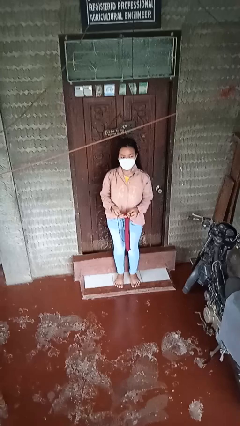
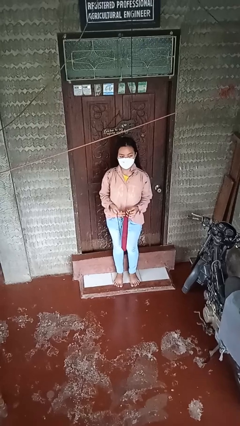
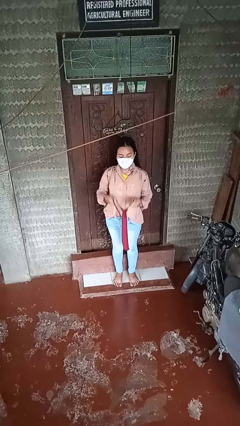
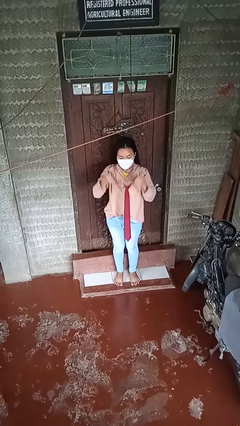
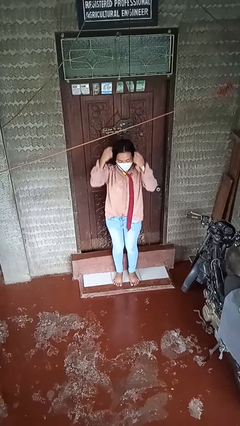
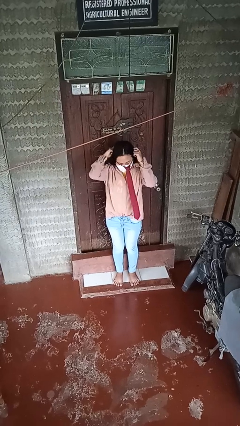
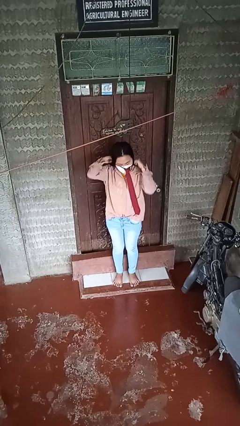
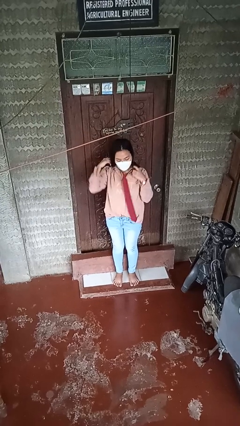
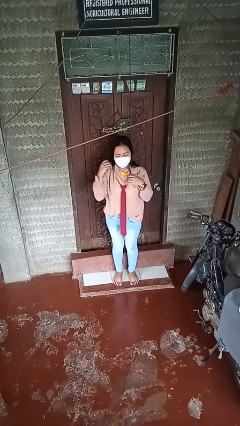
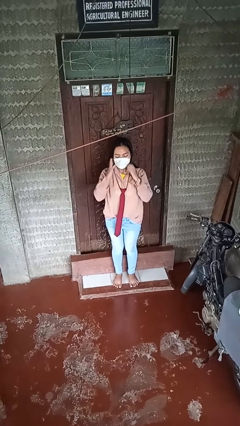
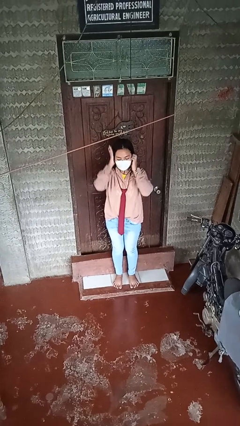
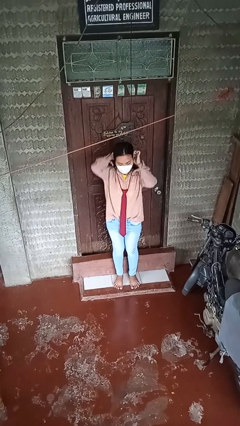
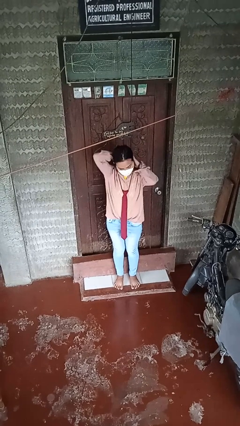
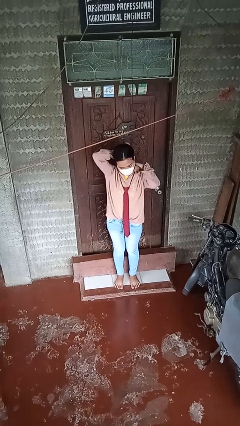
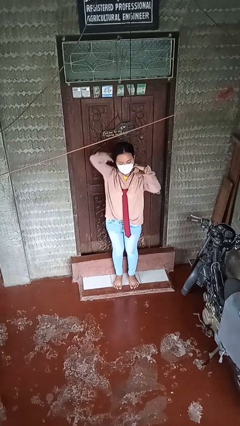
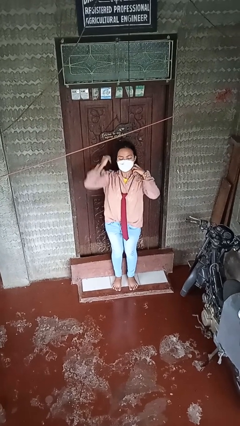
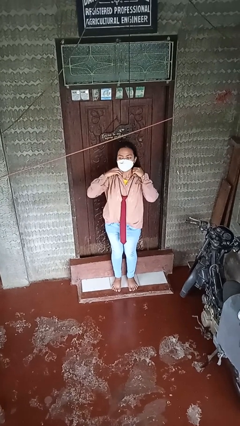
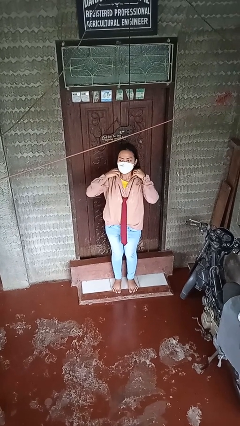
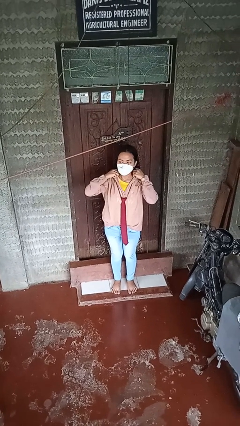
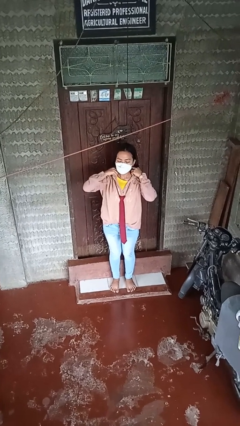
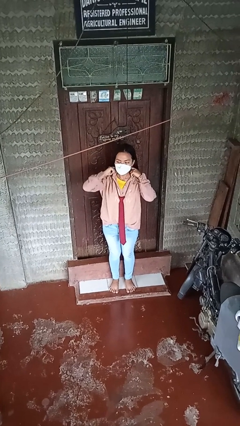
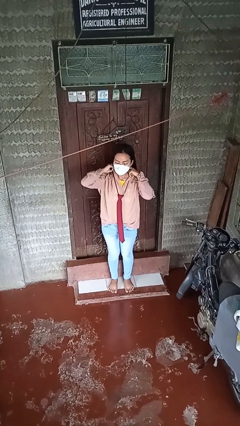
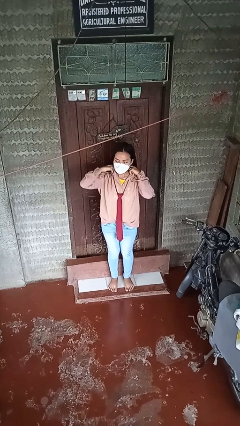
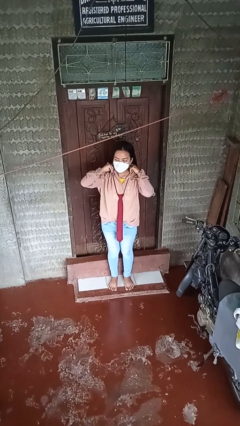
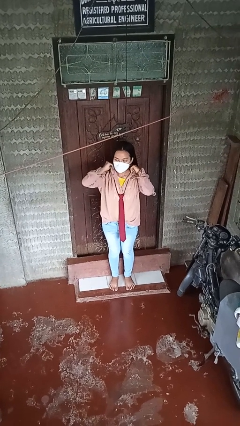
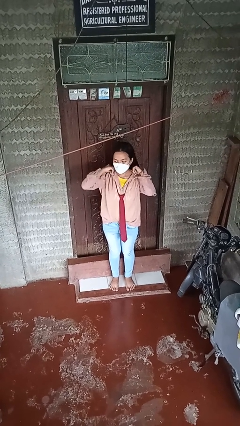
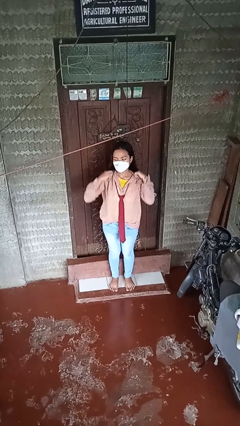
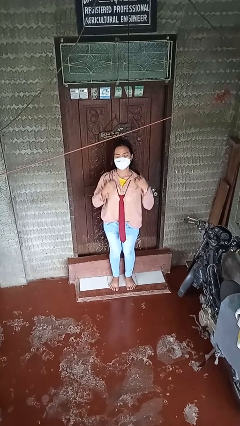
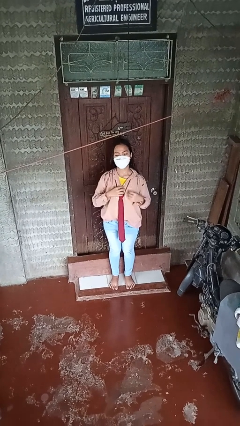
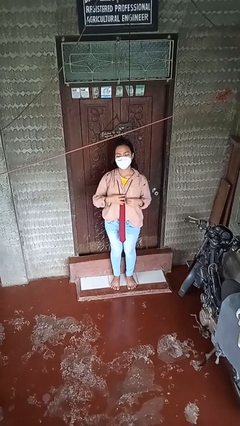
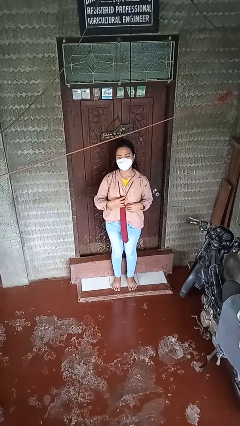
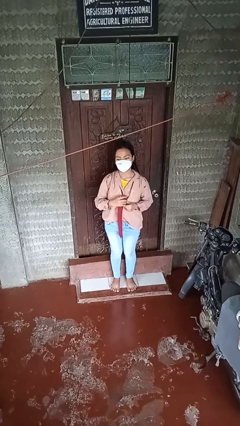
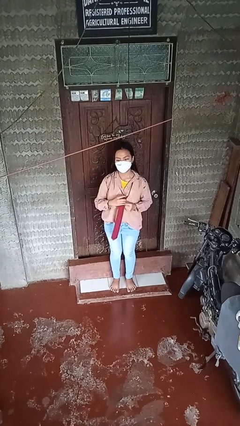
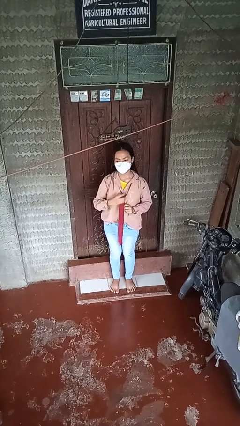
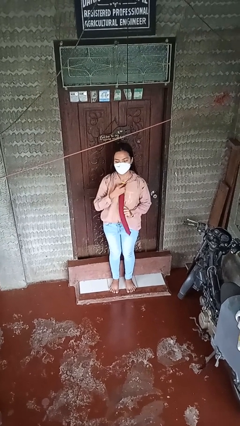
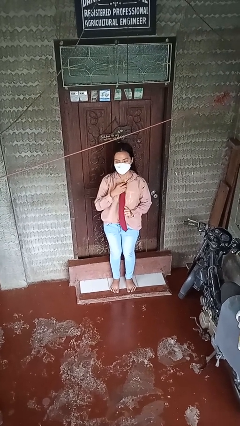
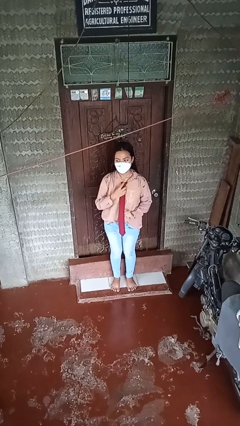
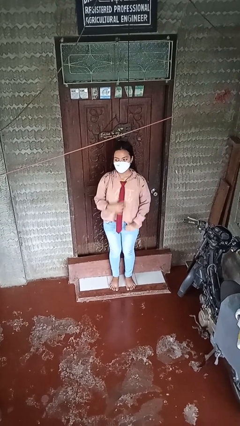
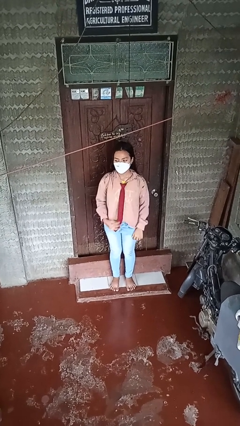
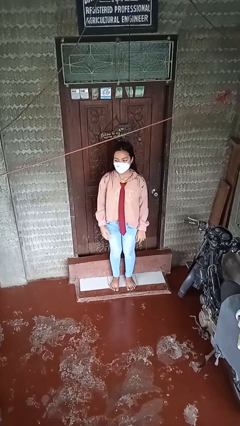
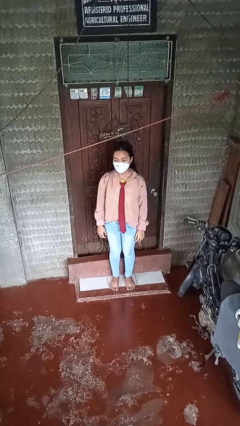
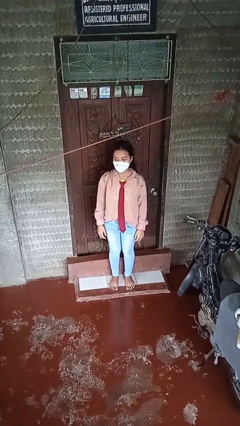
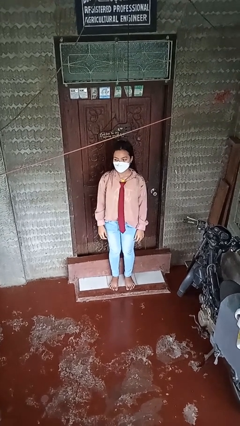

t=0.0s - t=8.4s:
person puts on necktie

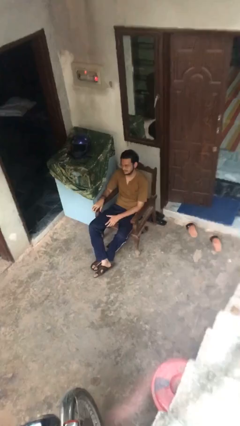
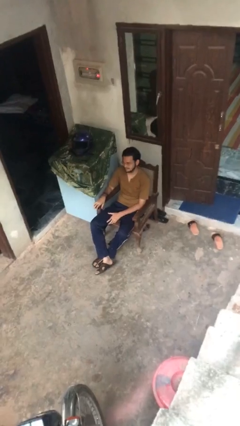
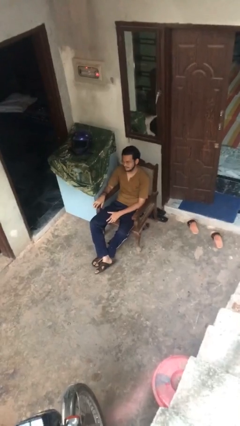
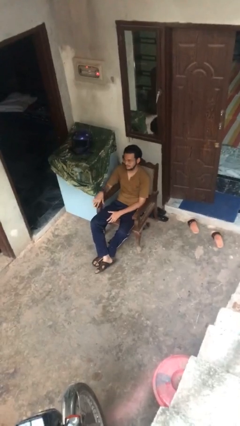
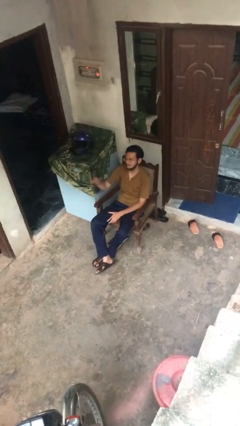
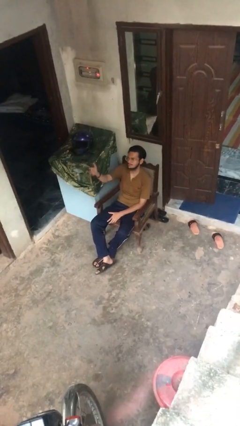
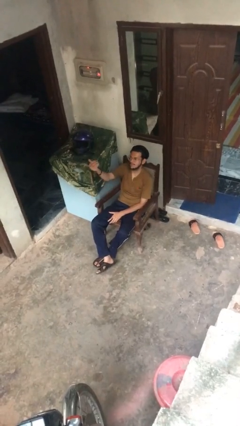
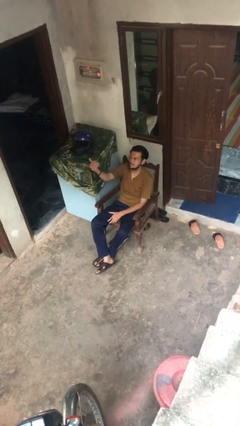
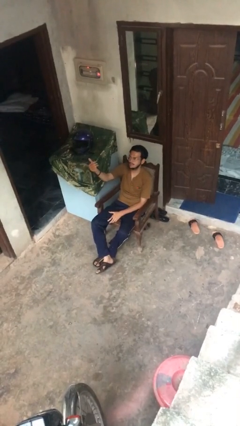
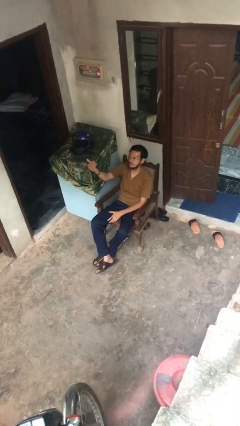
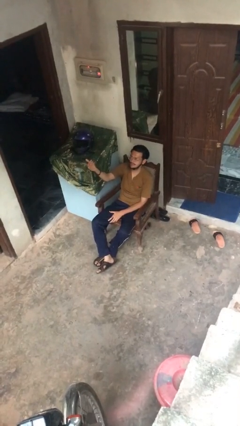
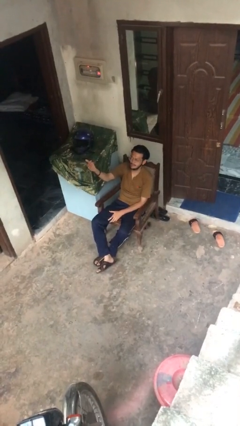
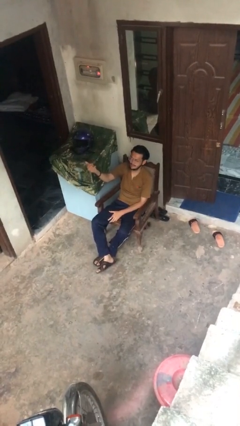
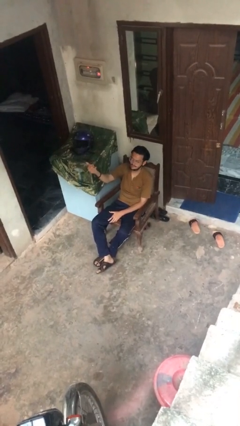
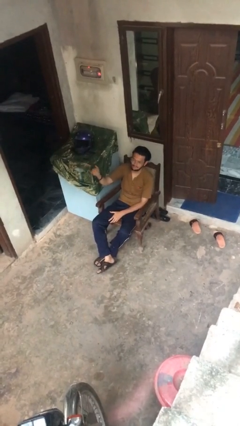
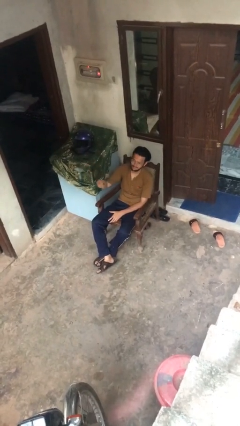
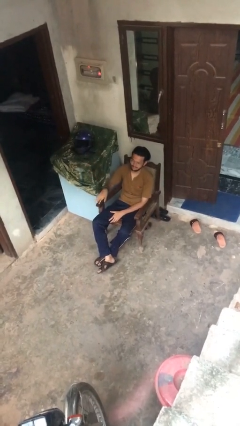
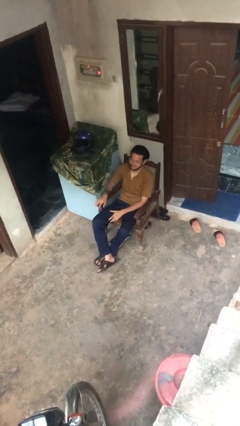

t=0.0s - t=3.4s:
person gestures come here

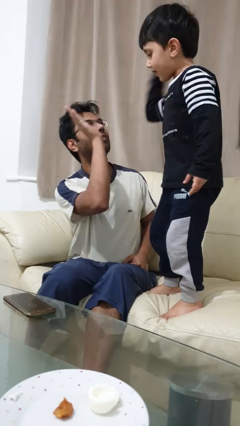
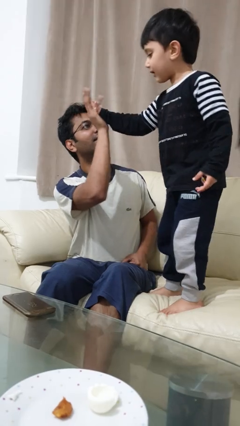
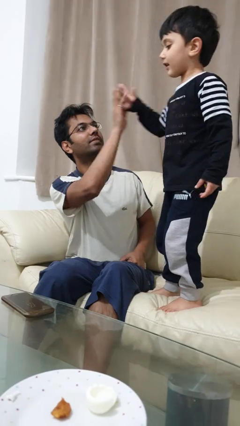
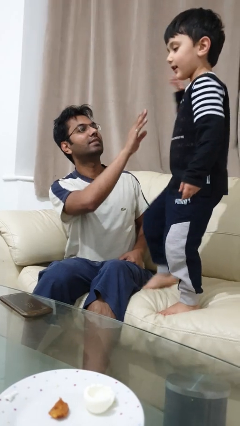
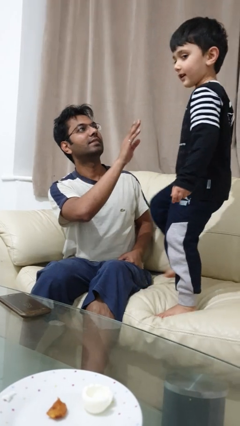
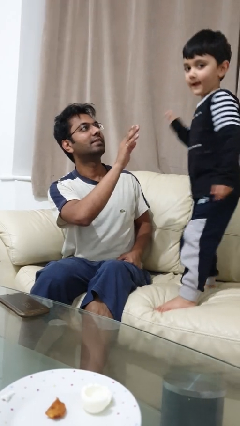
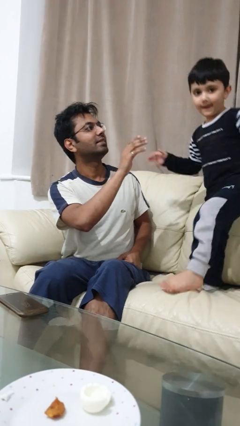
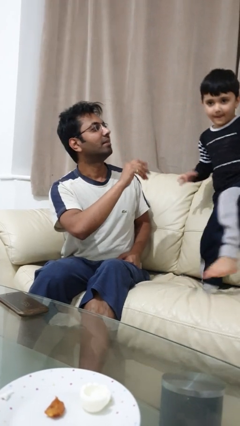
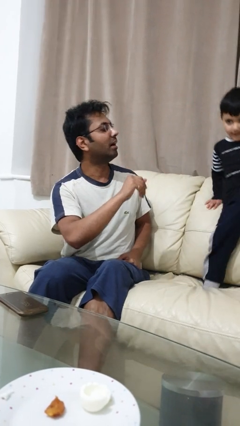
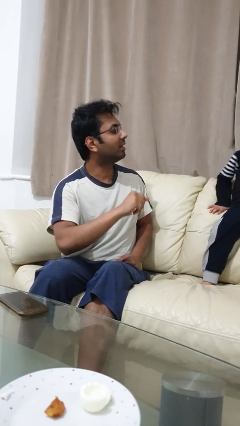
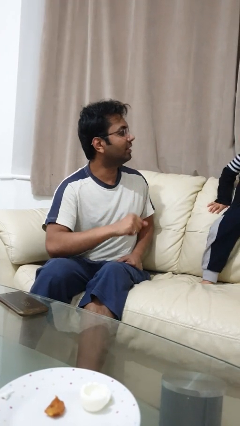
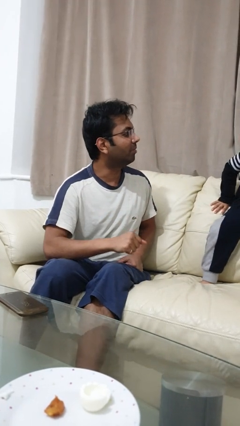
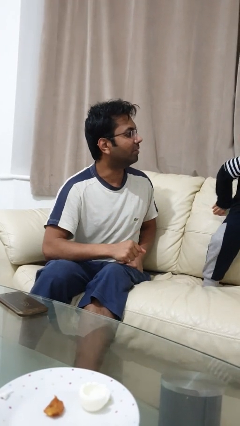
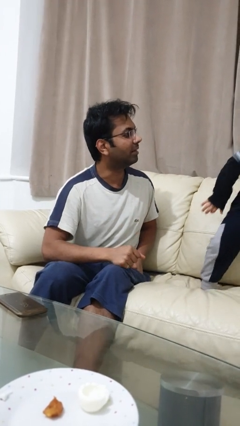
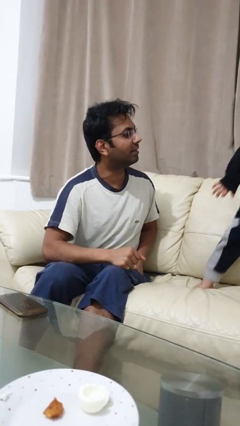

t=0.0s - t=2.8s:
person highfives hand

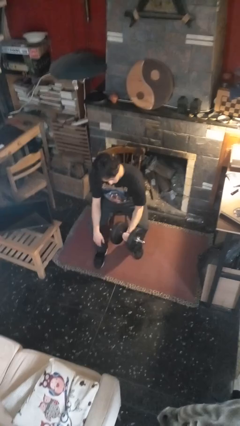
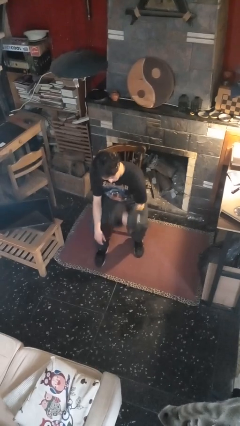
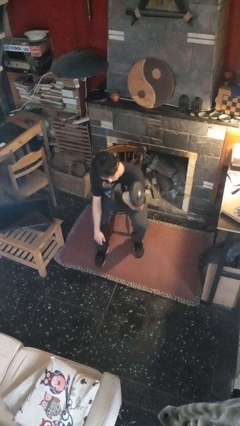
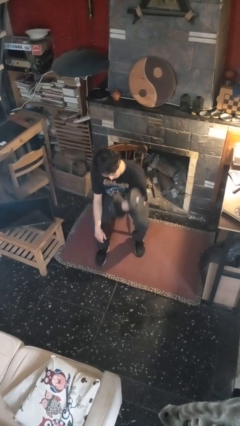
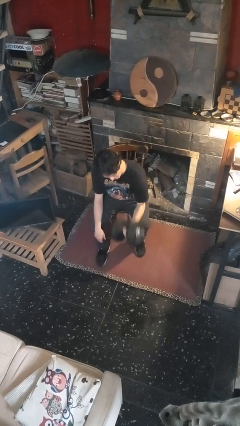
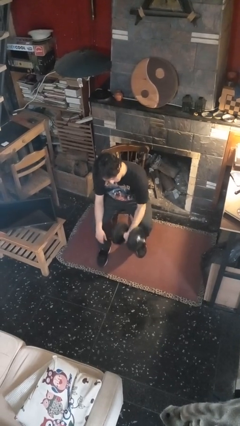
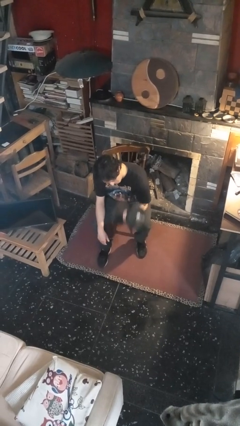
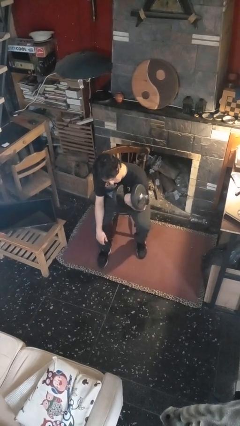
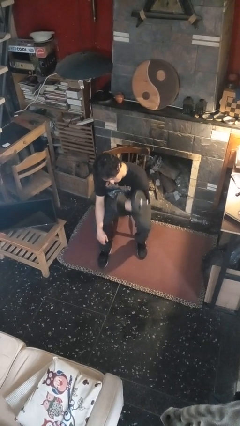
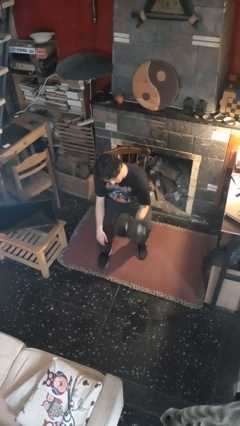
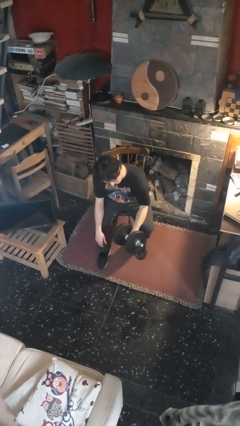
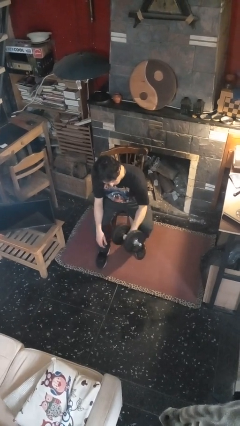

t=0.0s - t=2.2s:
person lifts dumbbells

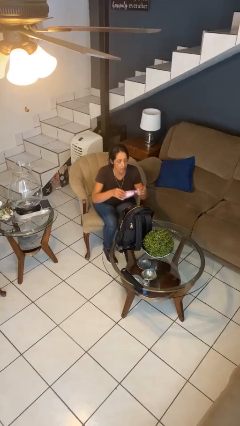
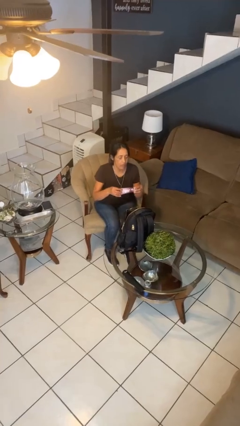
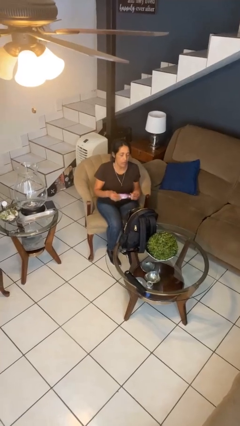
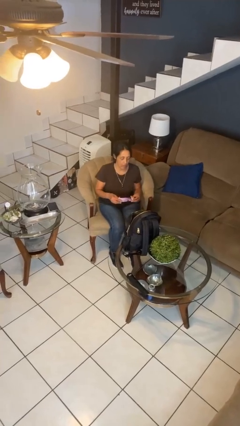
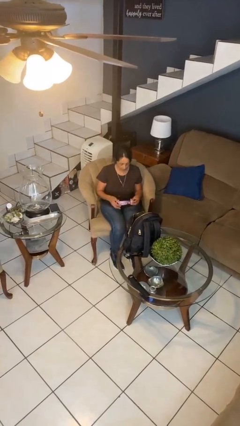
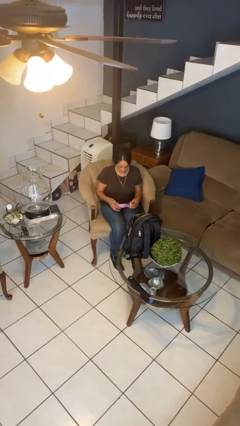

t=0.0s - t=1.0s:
person takes object from backpack
